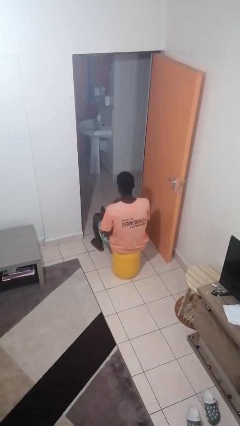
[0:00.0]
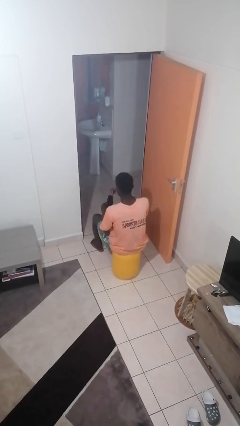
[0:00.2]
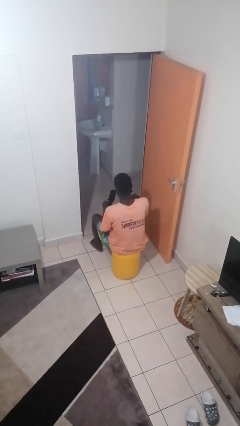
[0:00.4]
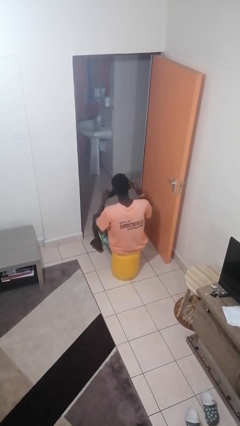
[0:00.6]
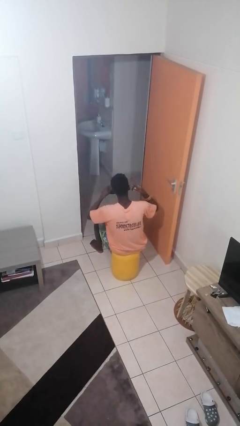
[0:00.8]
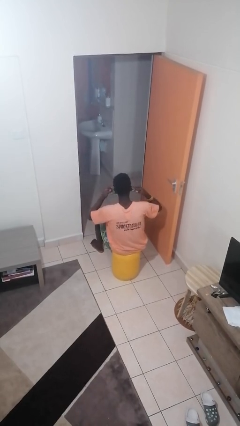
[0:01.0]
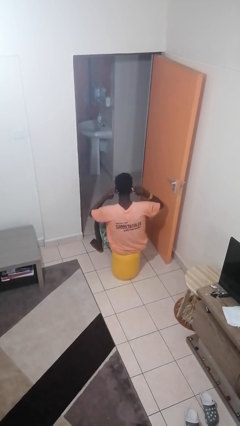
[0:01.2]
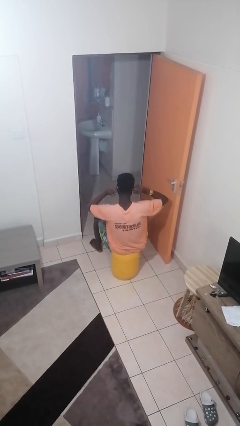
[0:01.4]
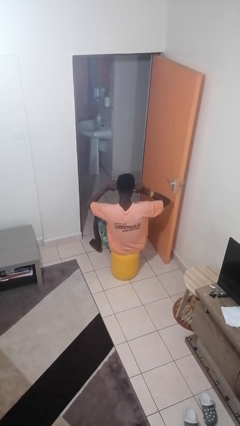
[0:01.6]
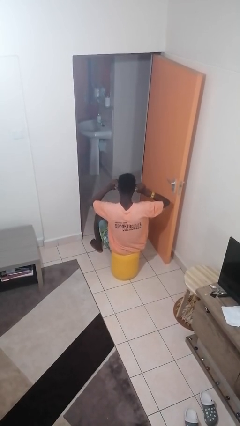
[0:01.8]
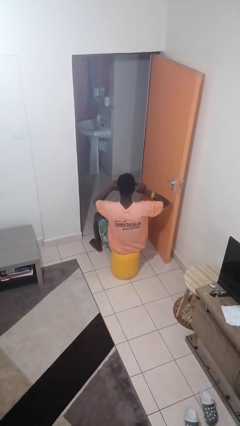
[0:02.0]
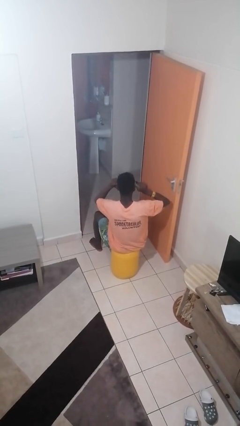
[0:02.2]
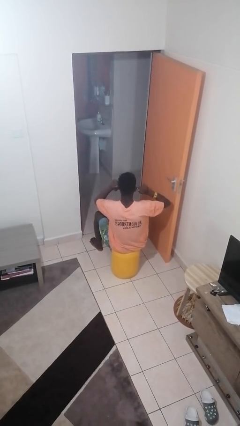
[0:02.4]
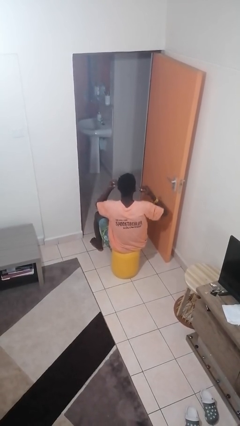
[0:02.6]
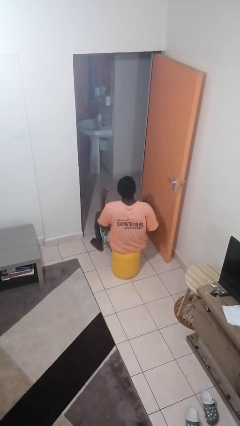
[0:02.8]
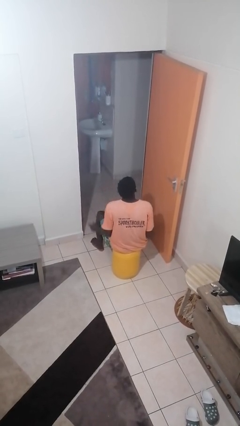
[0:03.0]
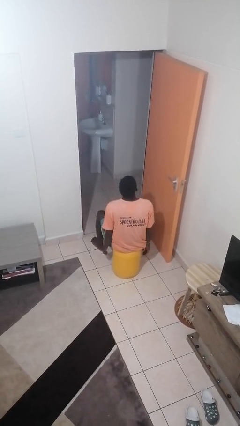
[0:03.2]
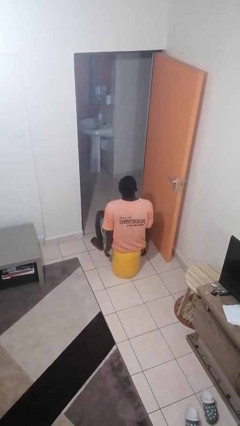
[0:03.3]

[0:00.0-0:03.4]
person puts on facemask

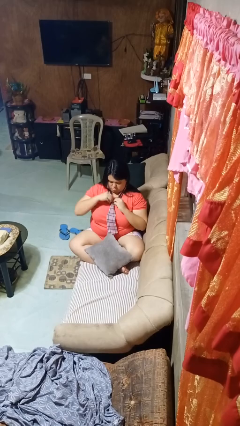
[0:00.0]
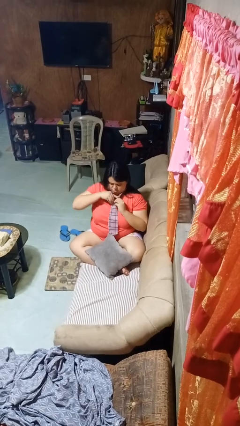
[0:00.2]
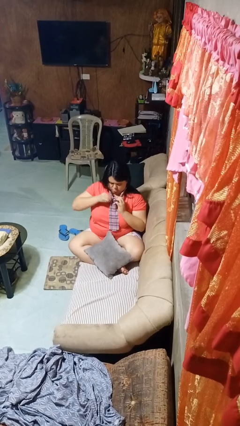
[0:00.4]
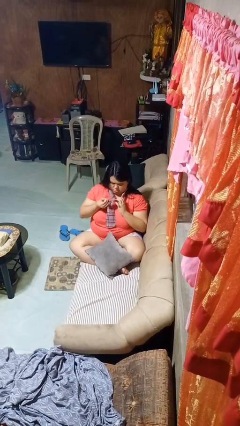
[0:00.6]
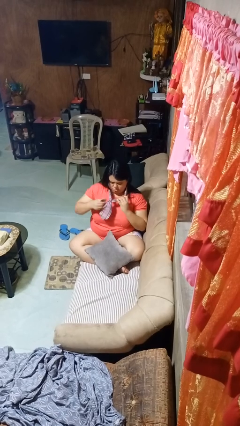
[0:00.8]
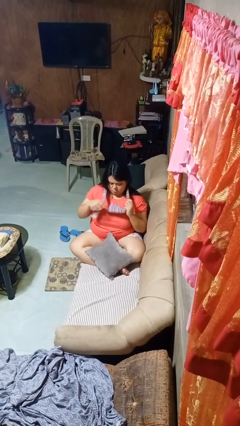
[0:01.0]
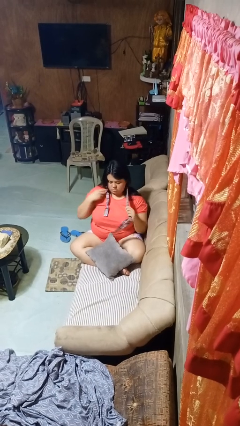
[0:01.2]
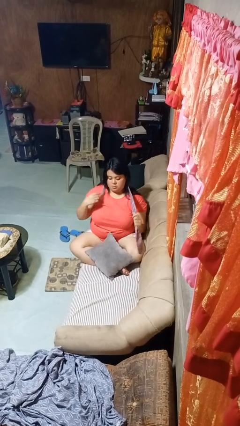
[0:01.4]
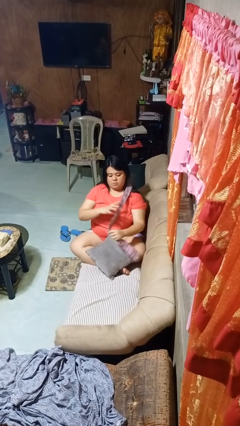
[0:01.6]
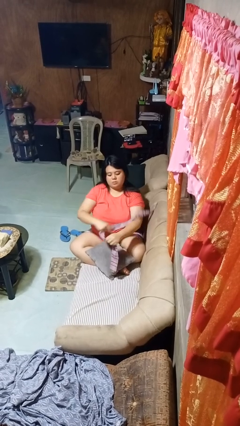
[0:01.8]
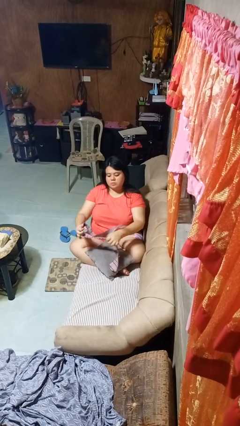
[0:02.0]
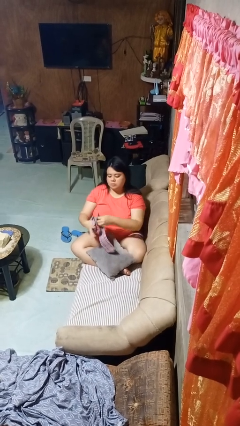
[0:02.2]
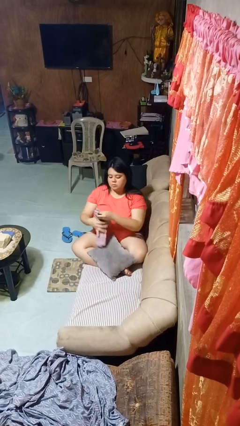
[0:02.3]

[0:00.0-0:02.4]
person takes off necktie

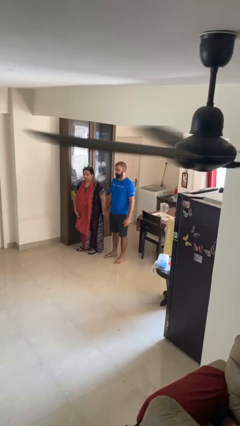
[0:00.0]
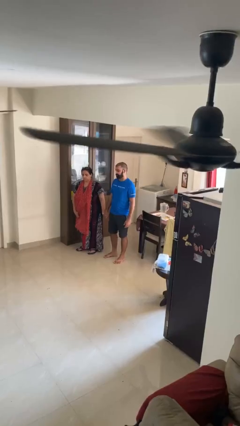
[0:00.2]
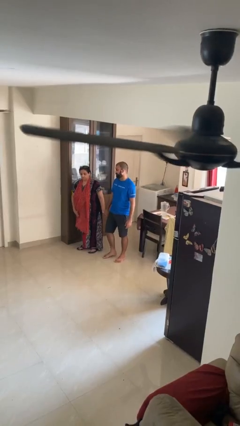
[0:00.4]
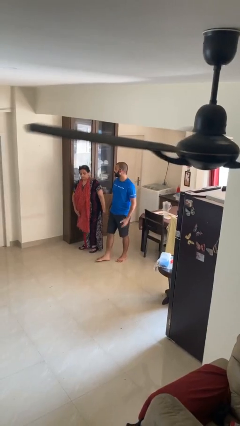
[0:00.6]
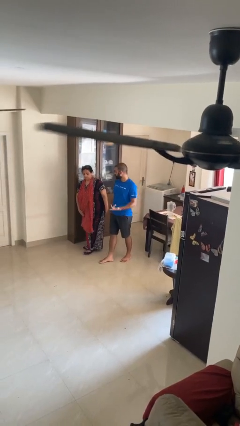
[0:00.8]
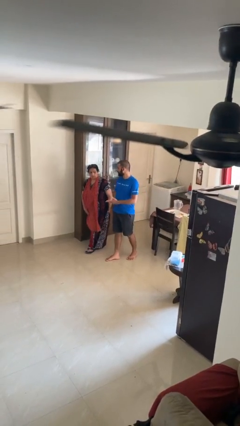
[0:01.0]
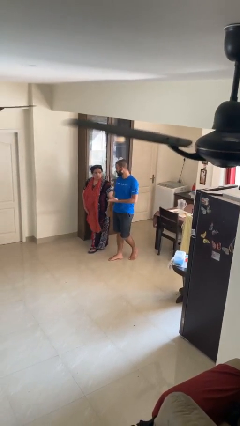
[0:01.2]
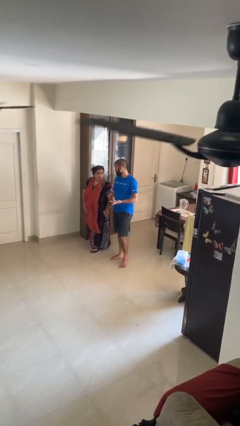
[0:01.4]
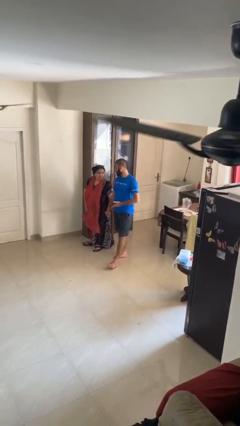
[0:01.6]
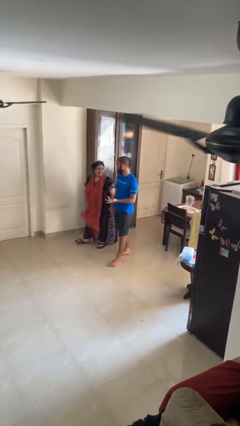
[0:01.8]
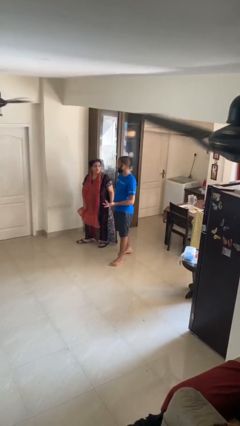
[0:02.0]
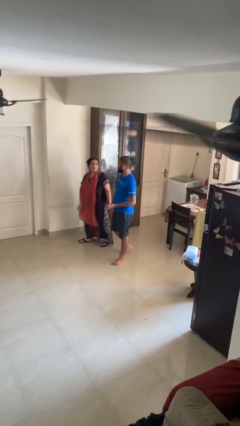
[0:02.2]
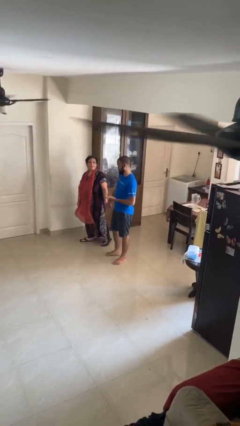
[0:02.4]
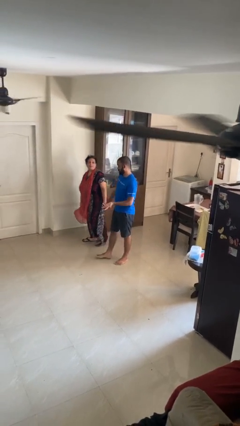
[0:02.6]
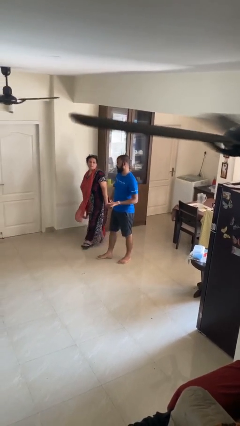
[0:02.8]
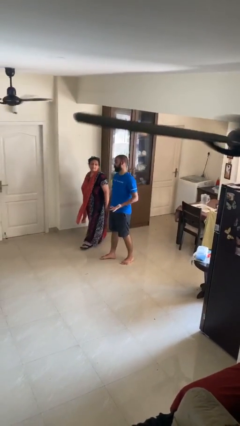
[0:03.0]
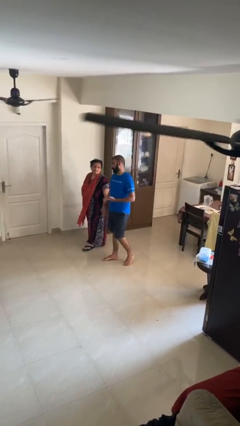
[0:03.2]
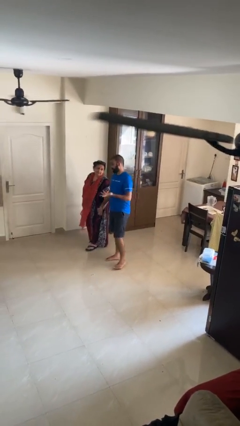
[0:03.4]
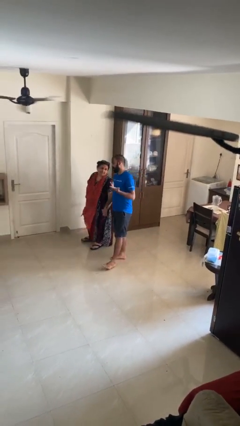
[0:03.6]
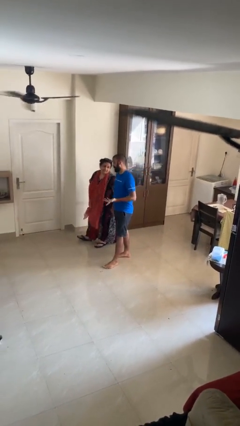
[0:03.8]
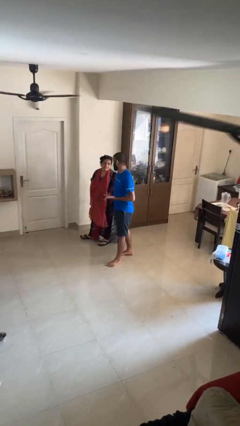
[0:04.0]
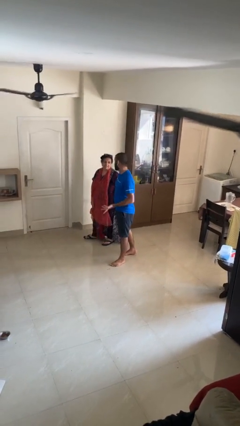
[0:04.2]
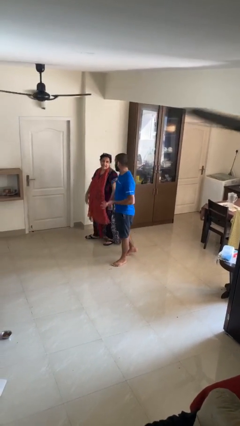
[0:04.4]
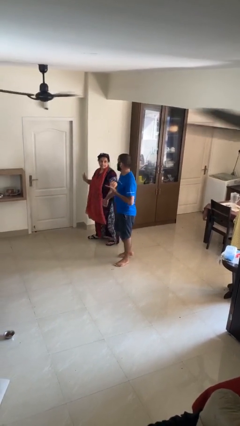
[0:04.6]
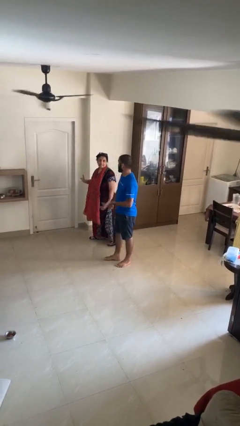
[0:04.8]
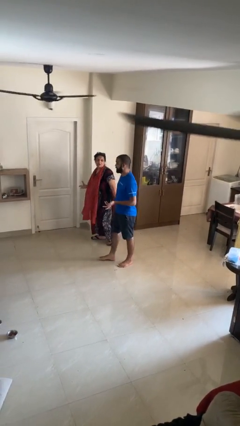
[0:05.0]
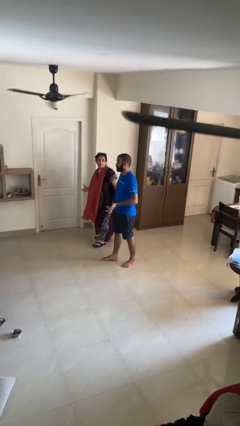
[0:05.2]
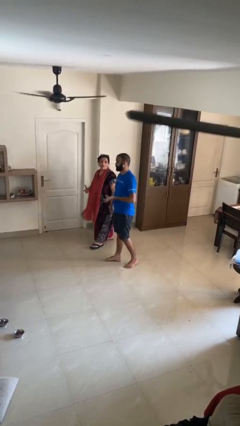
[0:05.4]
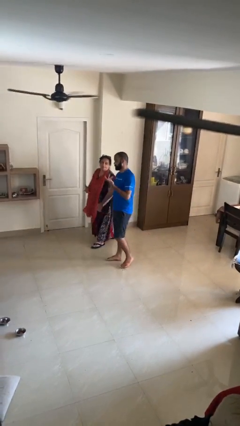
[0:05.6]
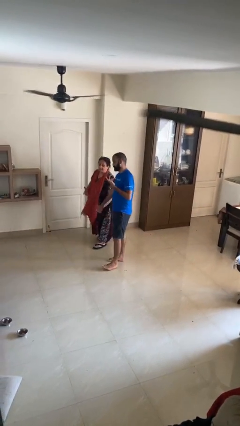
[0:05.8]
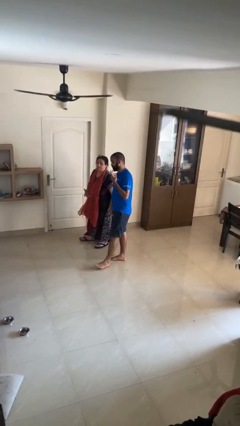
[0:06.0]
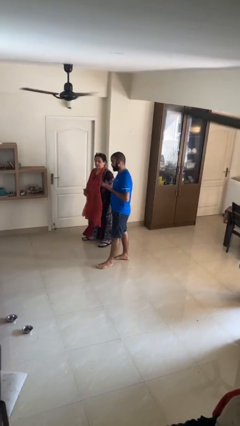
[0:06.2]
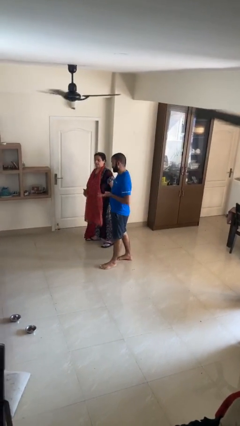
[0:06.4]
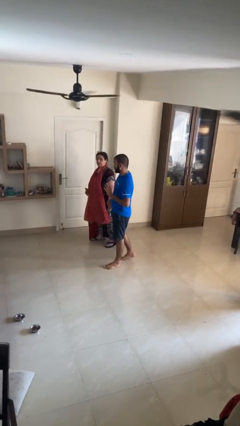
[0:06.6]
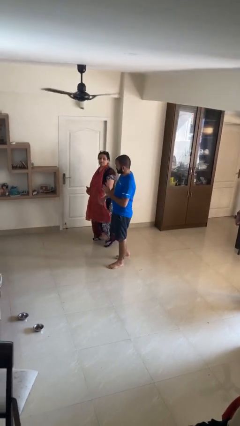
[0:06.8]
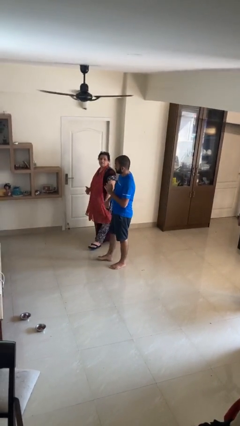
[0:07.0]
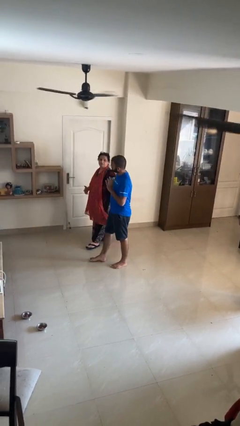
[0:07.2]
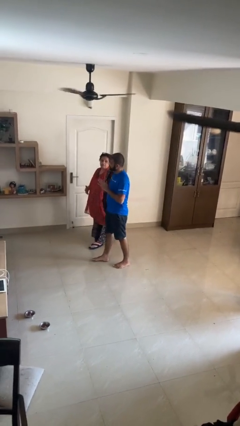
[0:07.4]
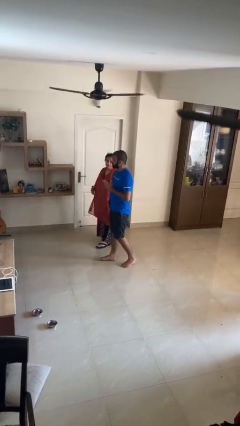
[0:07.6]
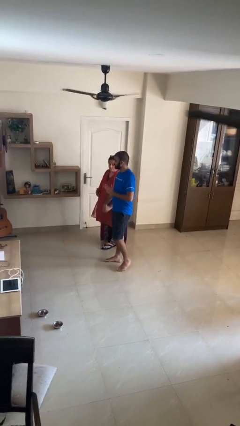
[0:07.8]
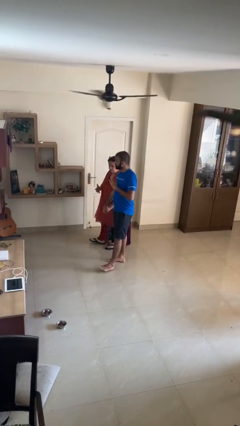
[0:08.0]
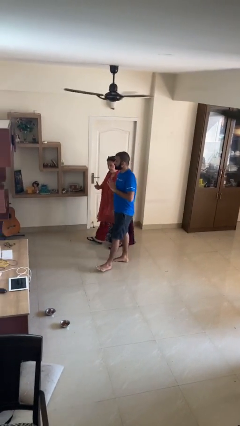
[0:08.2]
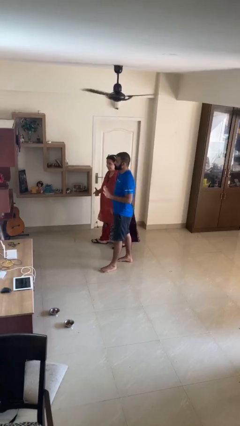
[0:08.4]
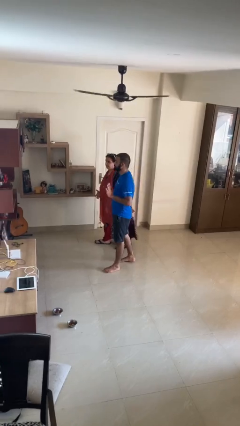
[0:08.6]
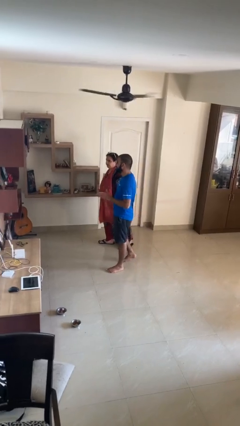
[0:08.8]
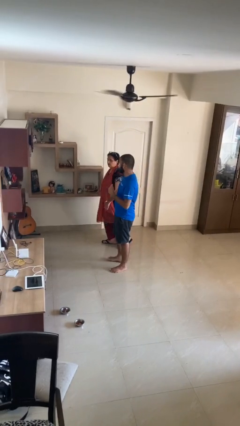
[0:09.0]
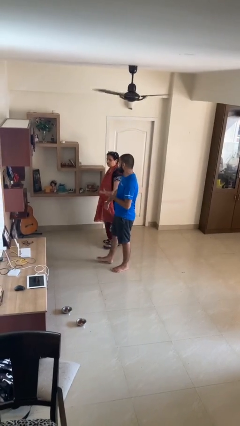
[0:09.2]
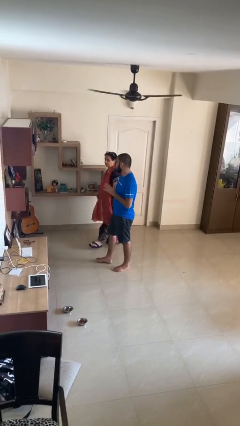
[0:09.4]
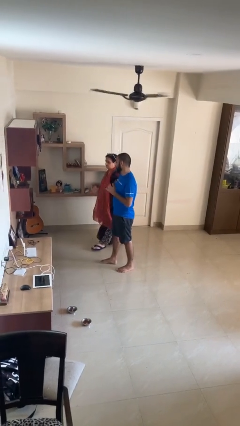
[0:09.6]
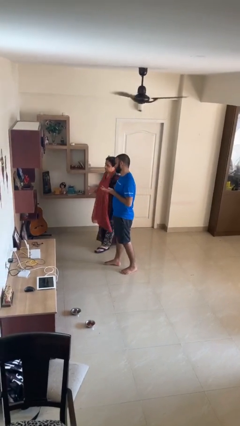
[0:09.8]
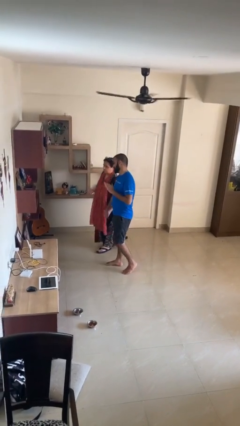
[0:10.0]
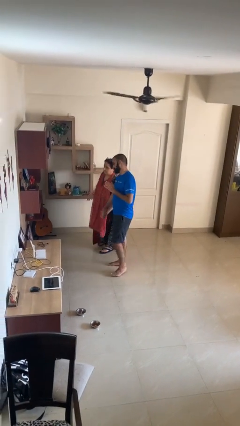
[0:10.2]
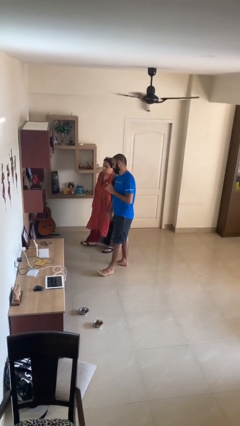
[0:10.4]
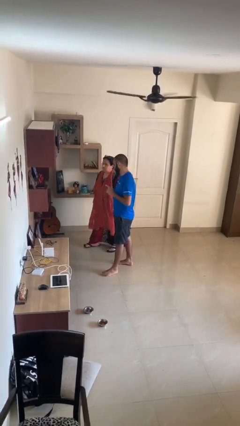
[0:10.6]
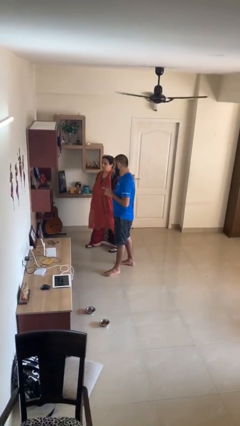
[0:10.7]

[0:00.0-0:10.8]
person holds hand

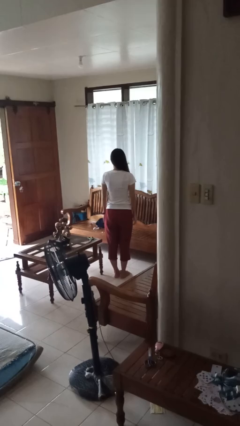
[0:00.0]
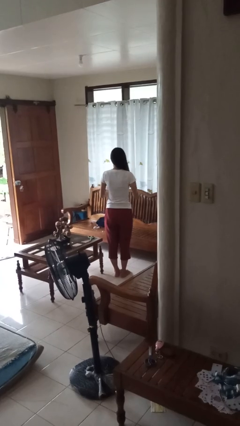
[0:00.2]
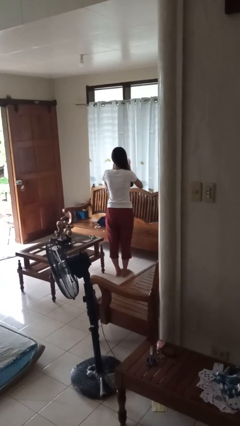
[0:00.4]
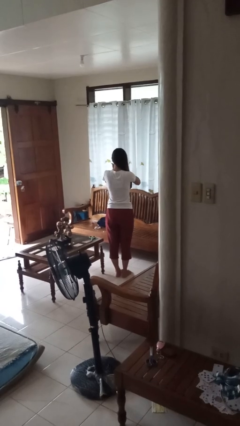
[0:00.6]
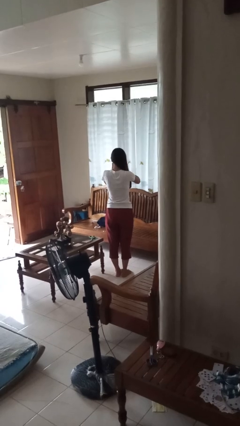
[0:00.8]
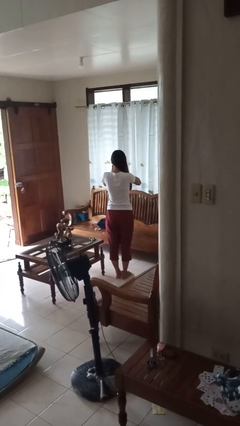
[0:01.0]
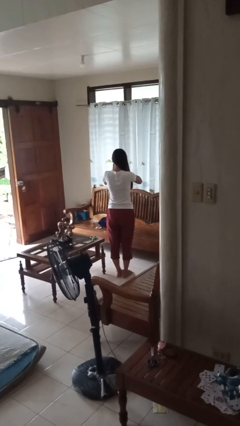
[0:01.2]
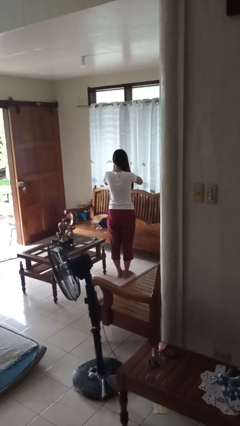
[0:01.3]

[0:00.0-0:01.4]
person covers face with hands
